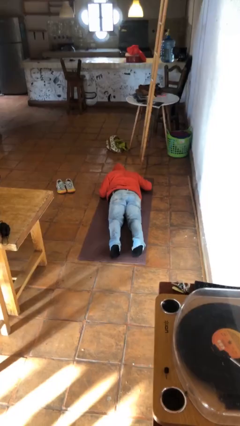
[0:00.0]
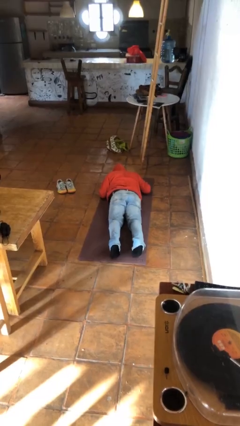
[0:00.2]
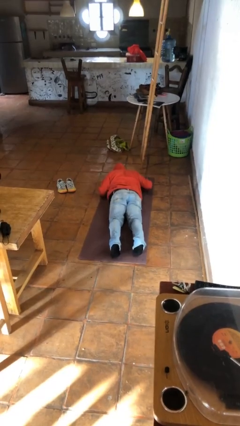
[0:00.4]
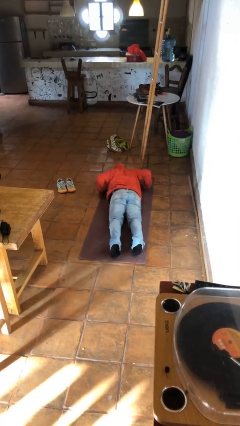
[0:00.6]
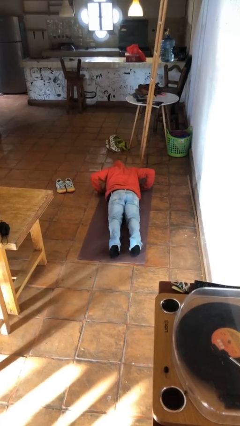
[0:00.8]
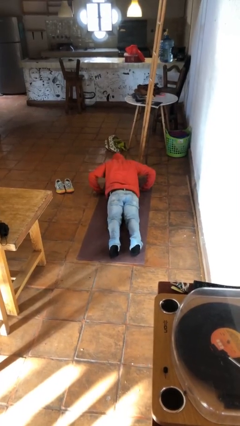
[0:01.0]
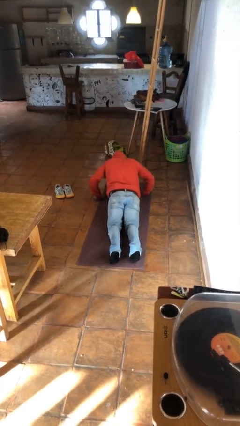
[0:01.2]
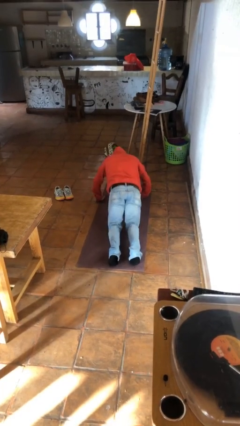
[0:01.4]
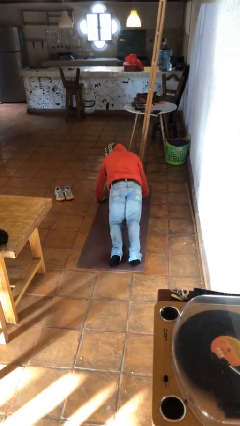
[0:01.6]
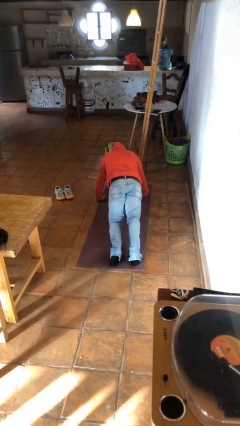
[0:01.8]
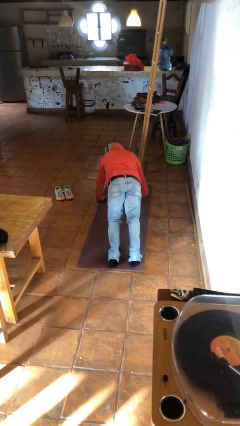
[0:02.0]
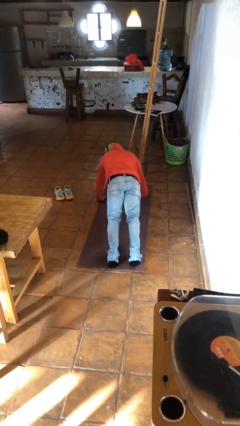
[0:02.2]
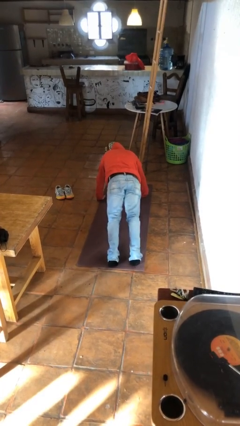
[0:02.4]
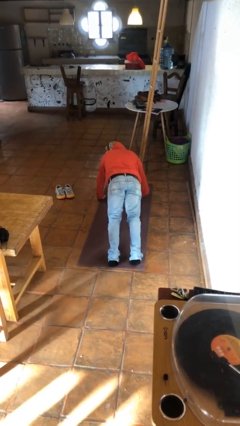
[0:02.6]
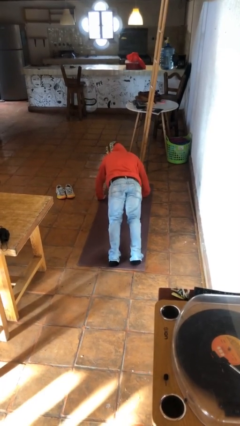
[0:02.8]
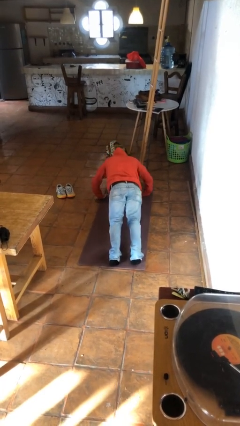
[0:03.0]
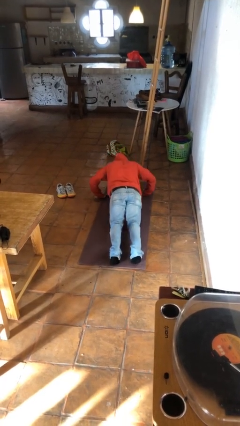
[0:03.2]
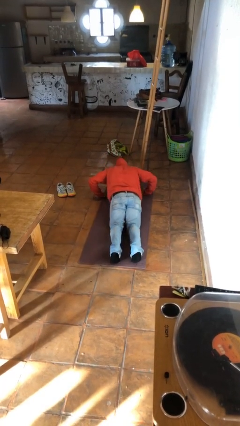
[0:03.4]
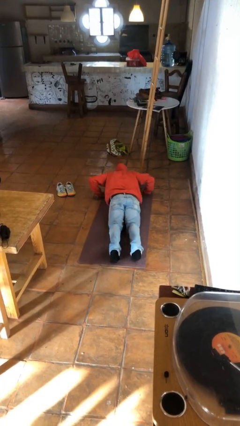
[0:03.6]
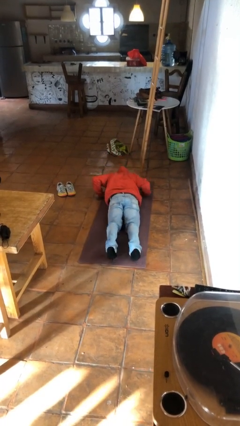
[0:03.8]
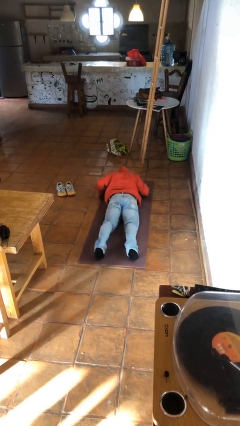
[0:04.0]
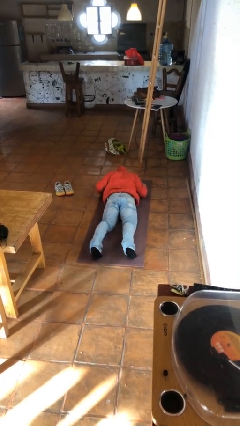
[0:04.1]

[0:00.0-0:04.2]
person exercises with pushup

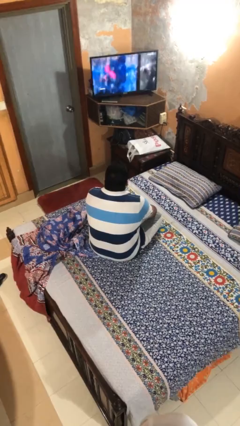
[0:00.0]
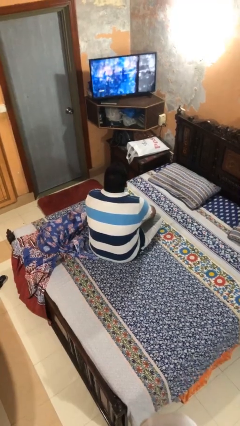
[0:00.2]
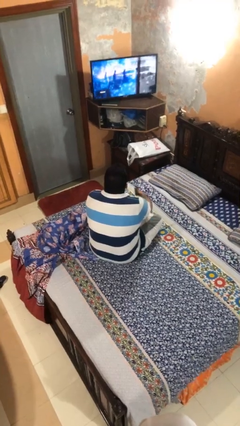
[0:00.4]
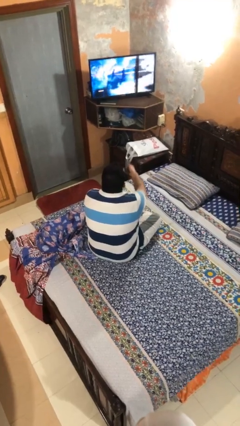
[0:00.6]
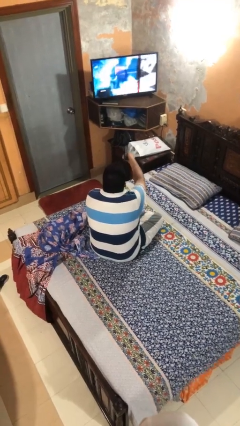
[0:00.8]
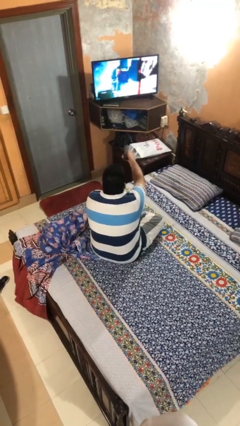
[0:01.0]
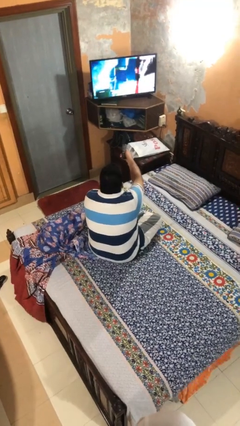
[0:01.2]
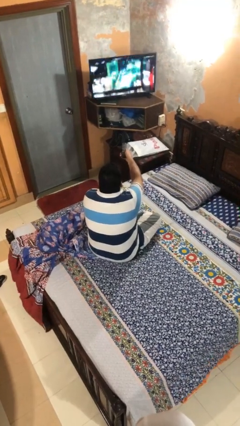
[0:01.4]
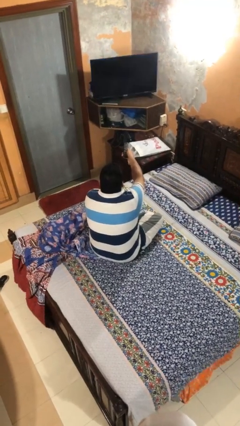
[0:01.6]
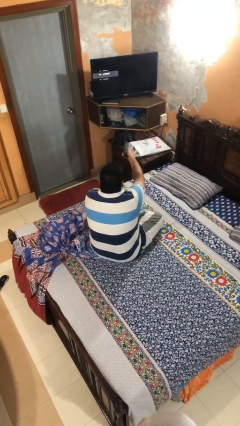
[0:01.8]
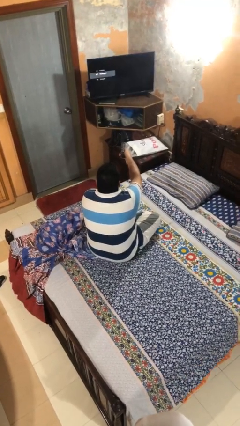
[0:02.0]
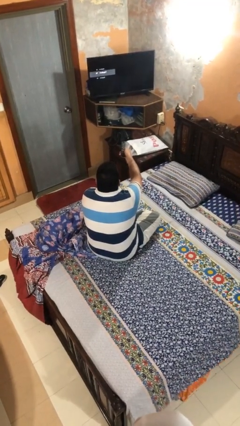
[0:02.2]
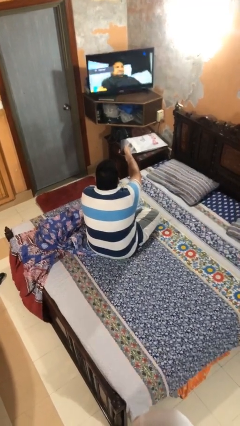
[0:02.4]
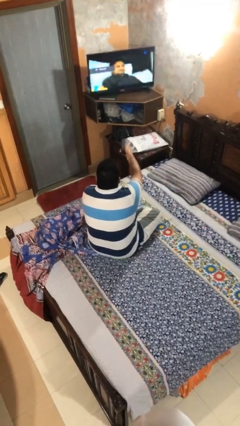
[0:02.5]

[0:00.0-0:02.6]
person uses television remote

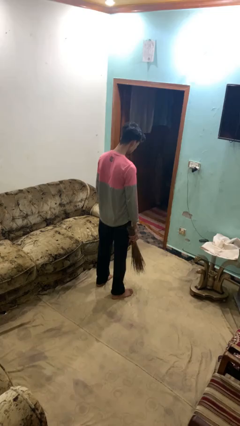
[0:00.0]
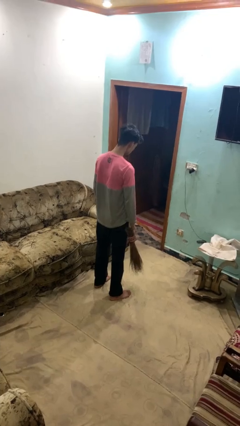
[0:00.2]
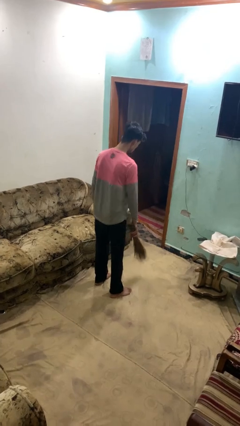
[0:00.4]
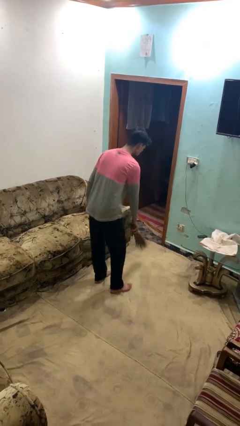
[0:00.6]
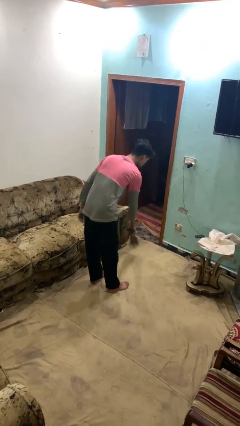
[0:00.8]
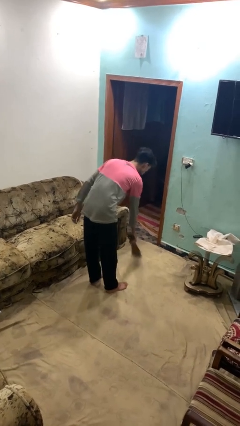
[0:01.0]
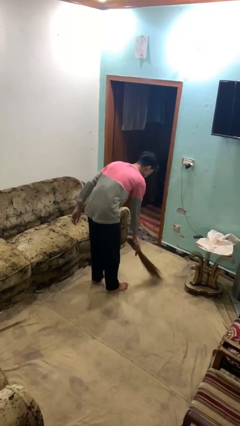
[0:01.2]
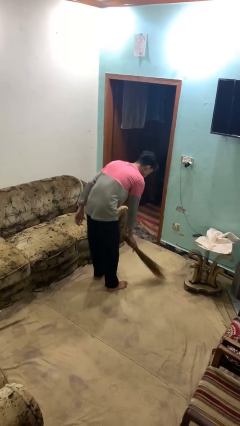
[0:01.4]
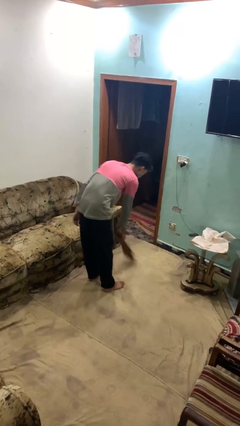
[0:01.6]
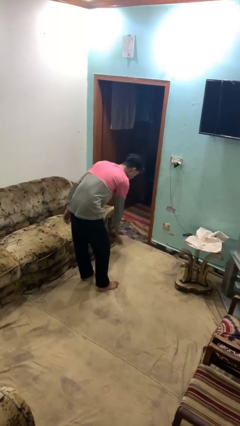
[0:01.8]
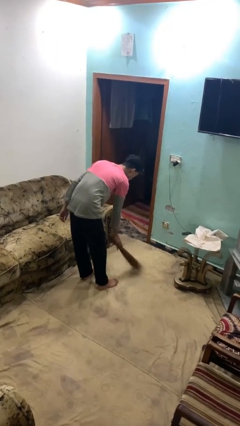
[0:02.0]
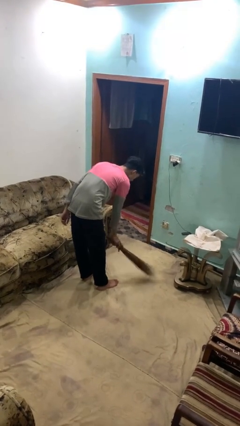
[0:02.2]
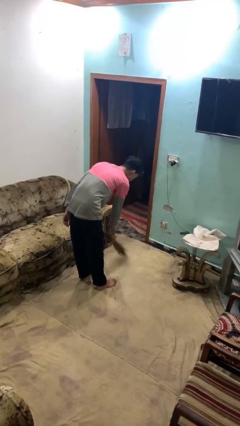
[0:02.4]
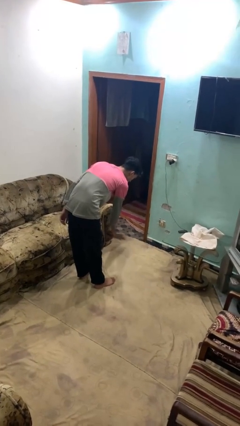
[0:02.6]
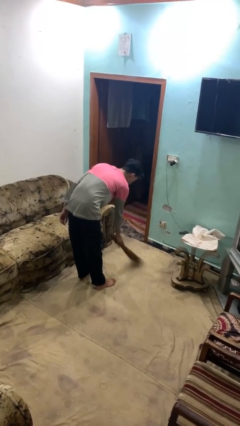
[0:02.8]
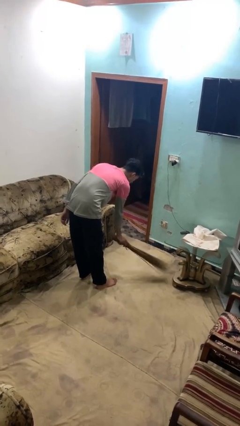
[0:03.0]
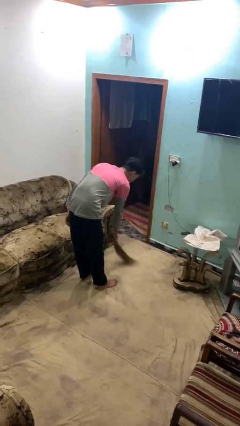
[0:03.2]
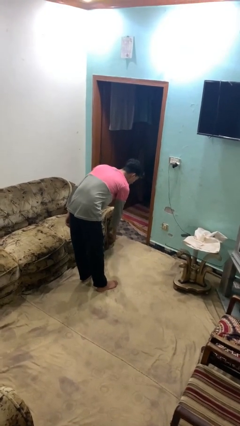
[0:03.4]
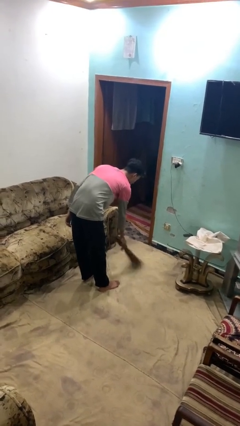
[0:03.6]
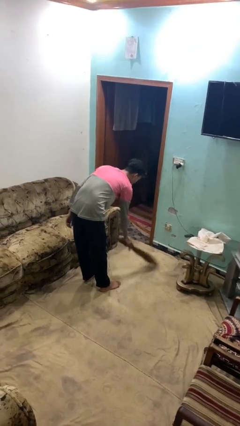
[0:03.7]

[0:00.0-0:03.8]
person sweeps floor

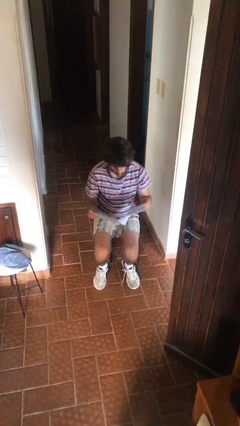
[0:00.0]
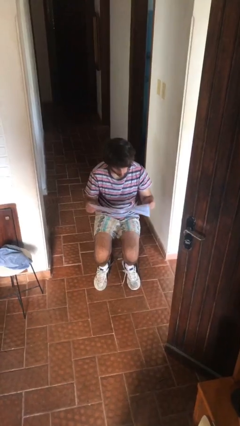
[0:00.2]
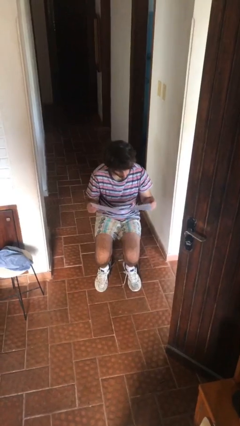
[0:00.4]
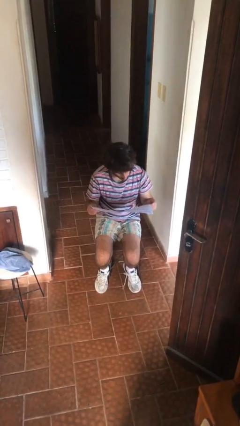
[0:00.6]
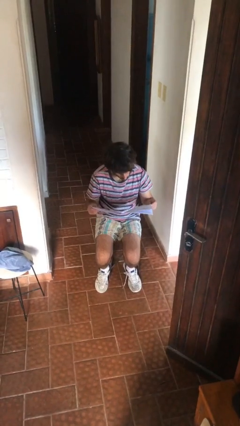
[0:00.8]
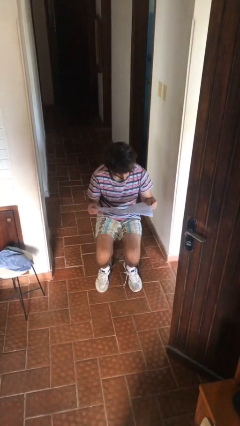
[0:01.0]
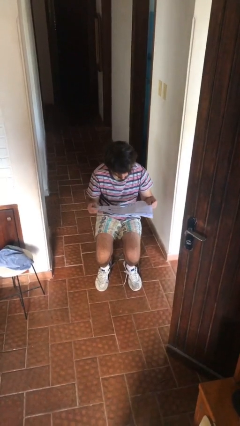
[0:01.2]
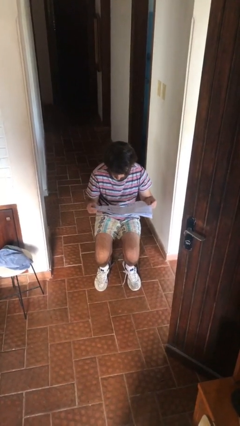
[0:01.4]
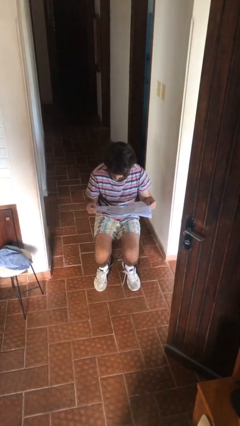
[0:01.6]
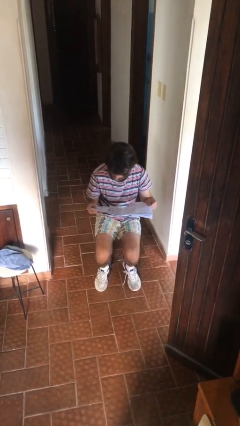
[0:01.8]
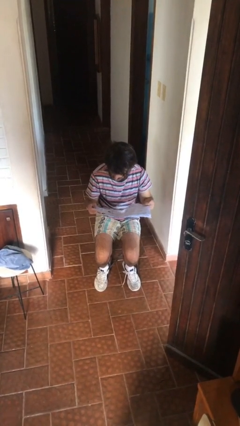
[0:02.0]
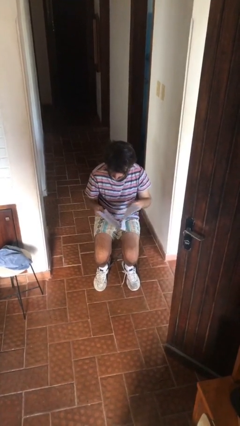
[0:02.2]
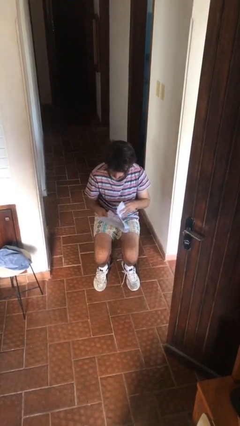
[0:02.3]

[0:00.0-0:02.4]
person reads document

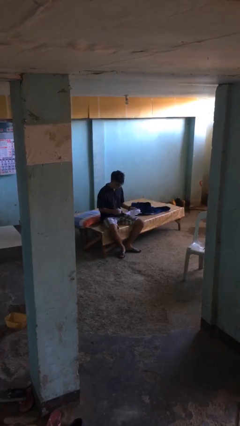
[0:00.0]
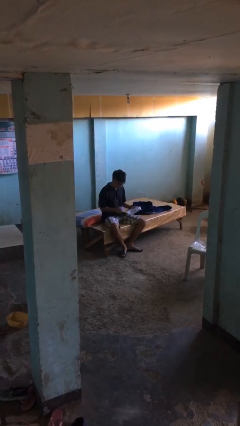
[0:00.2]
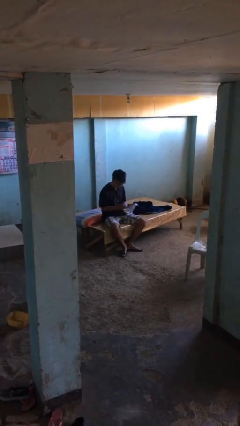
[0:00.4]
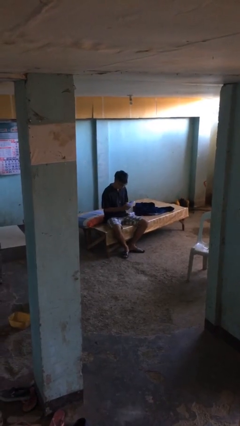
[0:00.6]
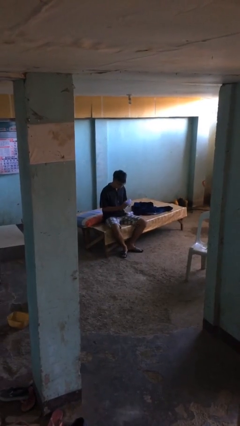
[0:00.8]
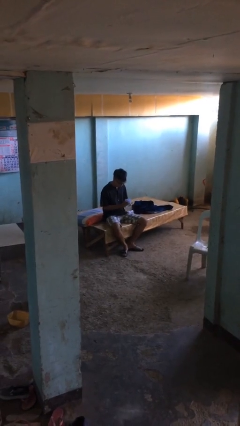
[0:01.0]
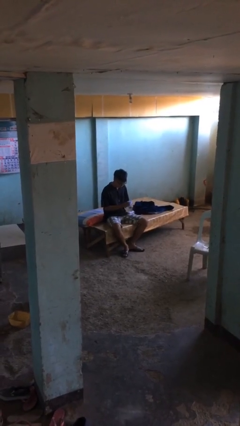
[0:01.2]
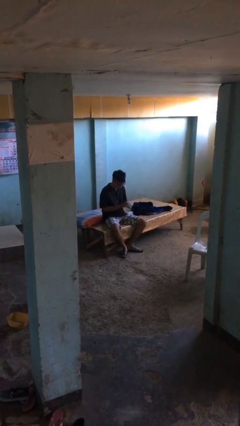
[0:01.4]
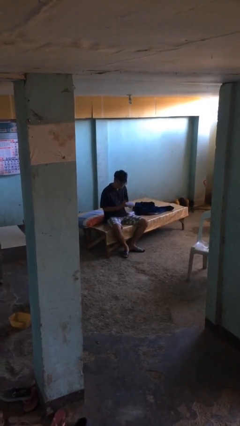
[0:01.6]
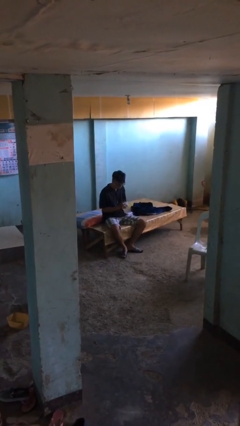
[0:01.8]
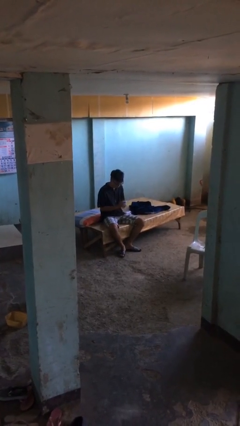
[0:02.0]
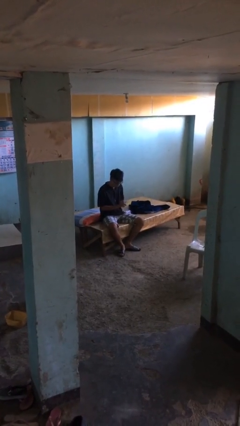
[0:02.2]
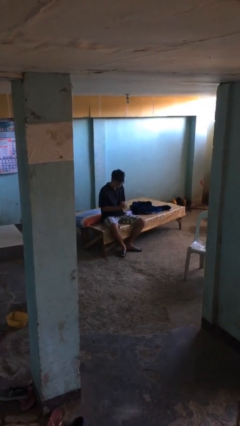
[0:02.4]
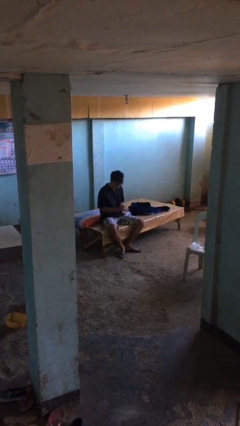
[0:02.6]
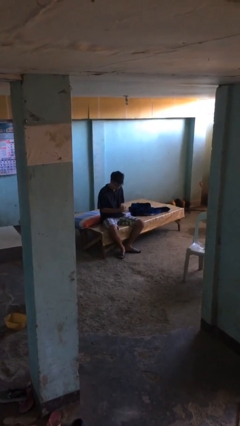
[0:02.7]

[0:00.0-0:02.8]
person crumples paper

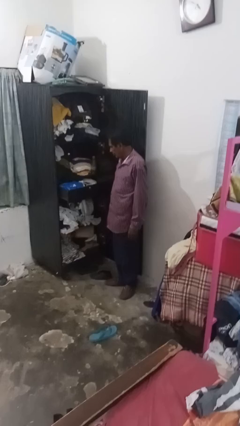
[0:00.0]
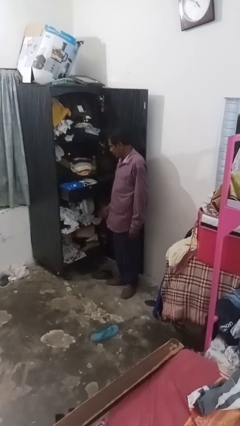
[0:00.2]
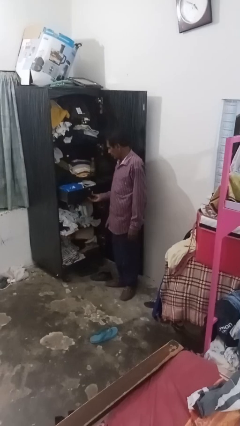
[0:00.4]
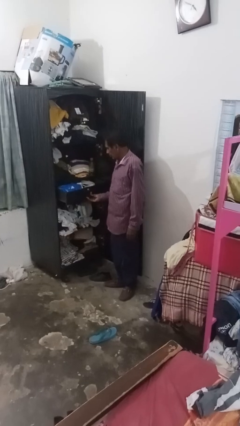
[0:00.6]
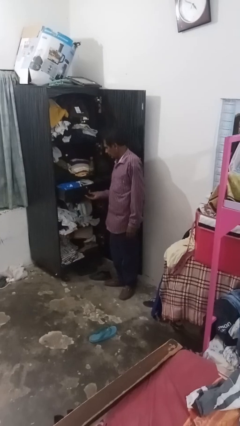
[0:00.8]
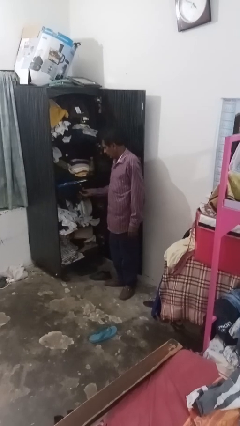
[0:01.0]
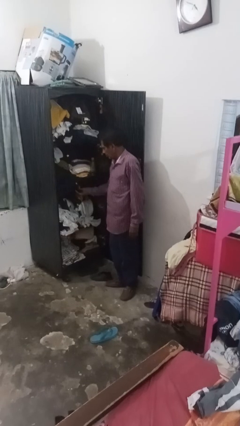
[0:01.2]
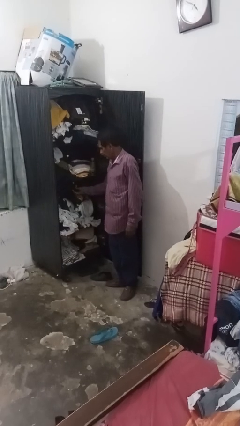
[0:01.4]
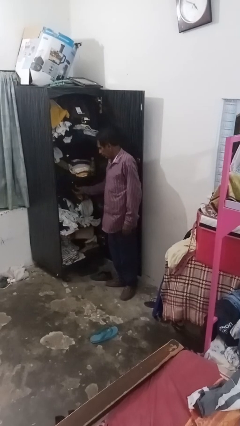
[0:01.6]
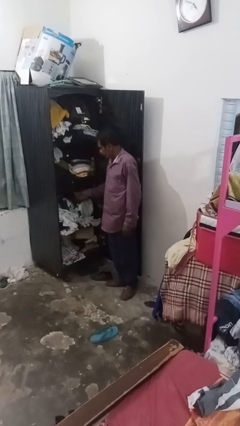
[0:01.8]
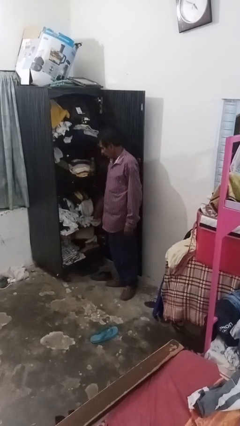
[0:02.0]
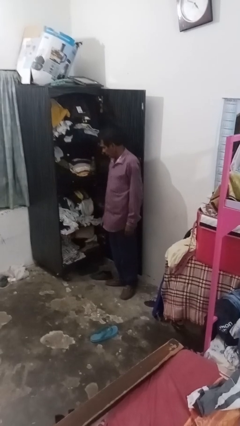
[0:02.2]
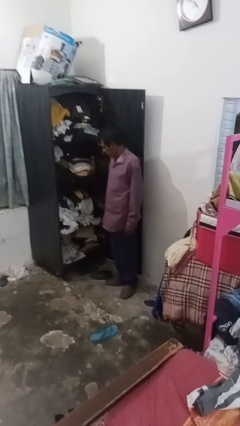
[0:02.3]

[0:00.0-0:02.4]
person closes dresser drawer
